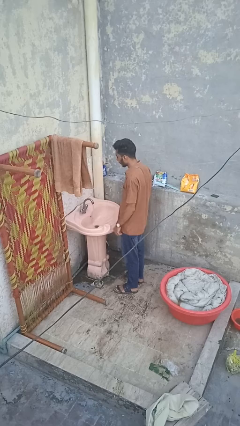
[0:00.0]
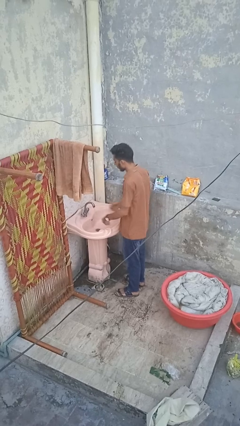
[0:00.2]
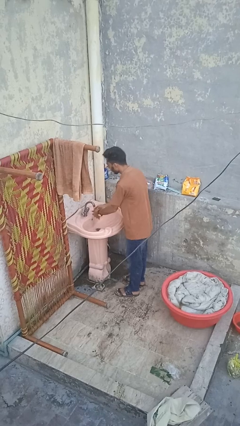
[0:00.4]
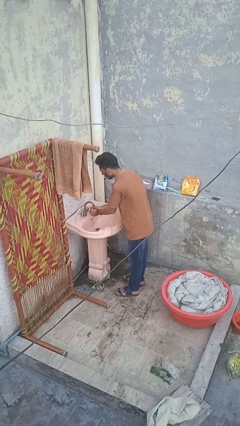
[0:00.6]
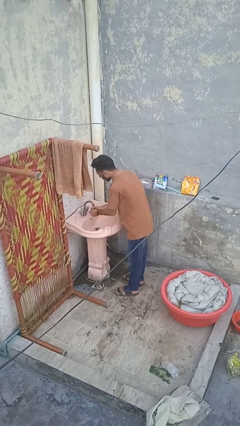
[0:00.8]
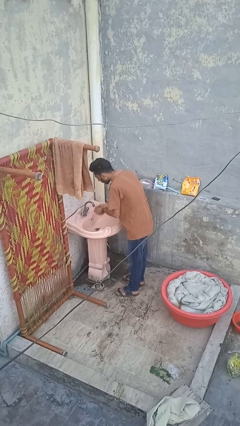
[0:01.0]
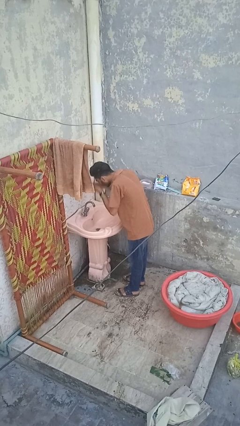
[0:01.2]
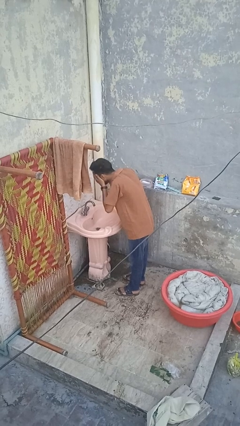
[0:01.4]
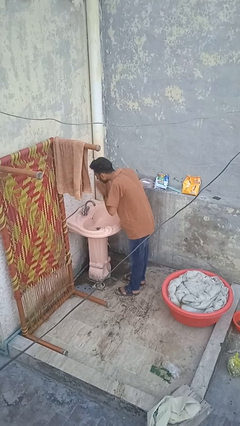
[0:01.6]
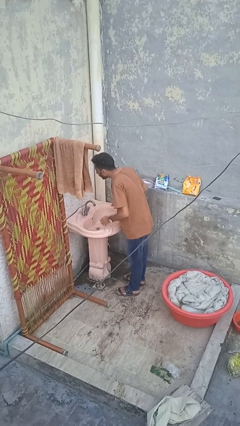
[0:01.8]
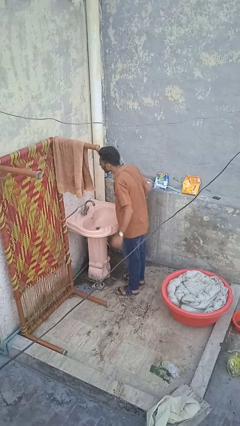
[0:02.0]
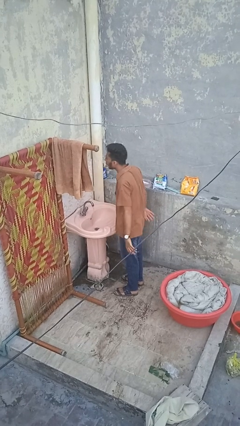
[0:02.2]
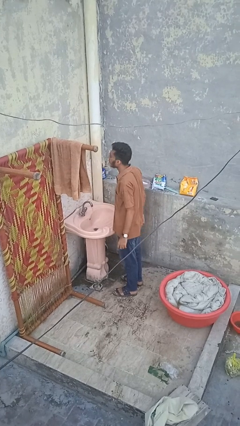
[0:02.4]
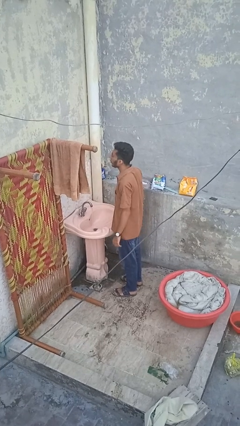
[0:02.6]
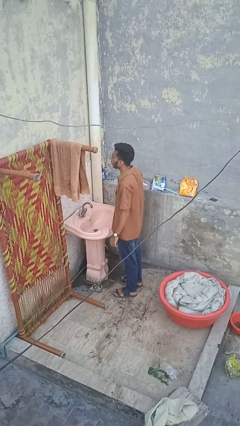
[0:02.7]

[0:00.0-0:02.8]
person washes face

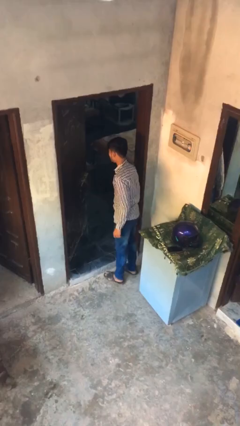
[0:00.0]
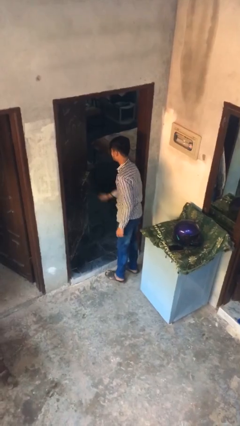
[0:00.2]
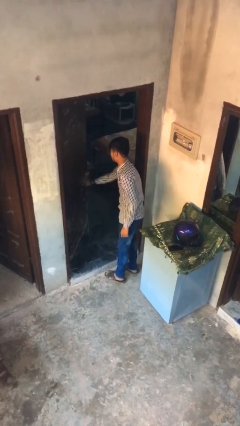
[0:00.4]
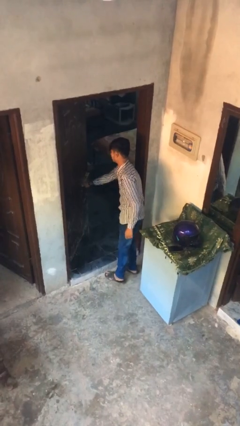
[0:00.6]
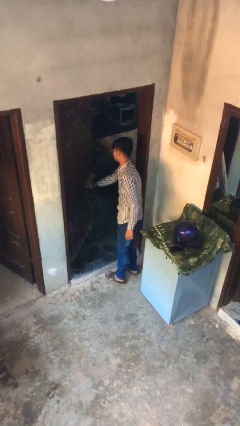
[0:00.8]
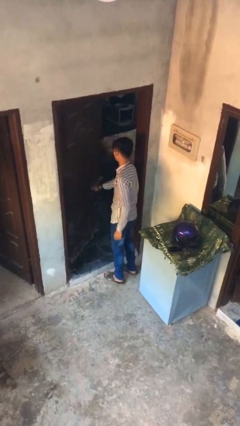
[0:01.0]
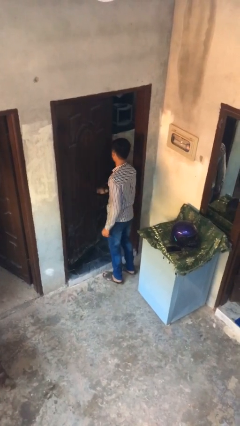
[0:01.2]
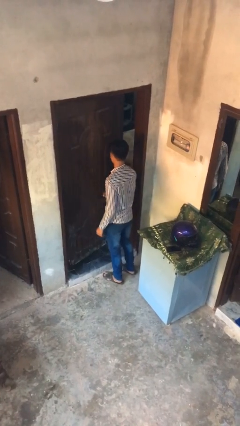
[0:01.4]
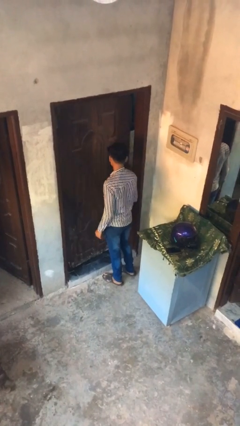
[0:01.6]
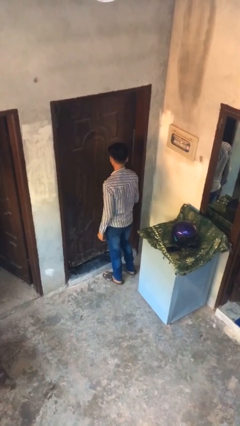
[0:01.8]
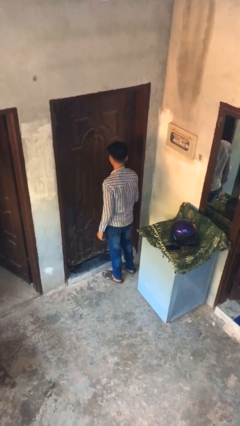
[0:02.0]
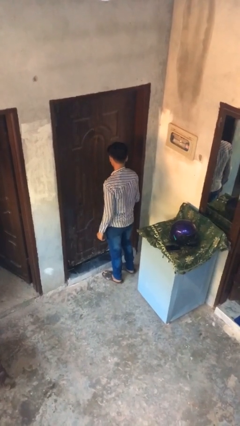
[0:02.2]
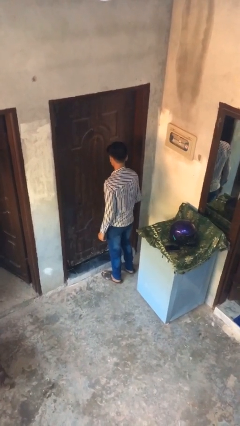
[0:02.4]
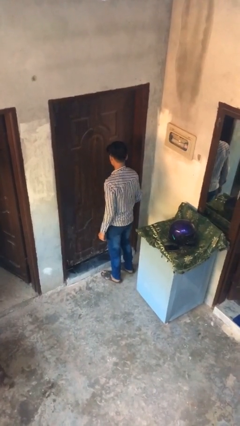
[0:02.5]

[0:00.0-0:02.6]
person closes facility door

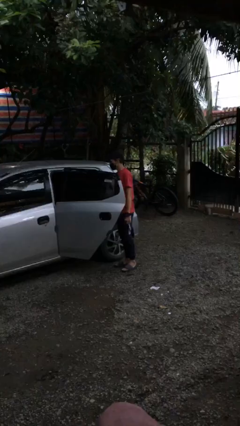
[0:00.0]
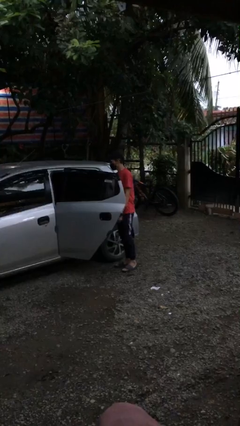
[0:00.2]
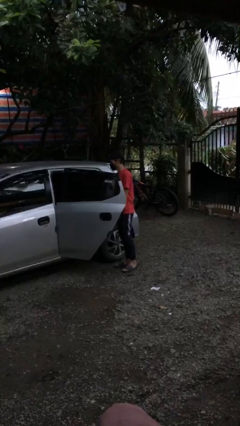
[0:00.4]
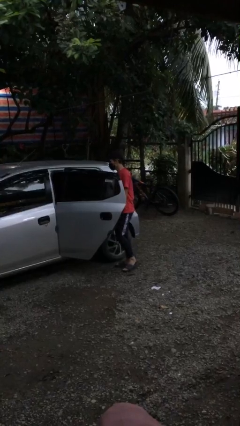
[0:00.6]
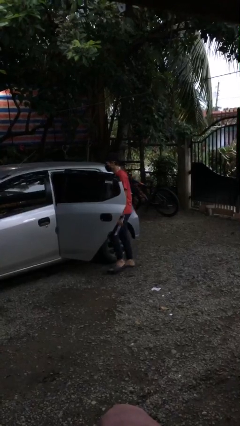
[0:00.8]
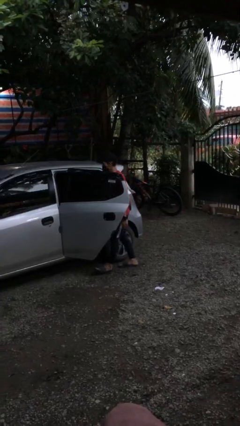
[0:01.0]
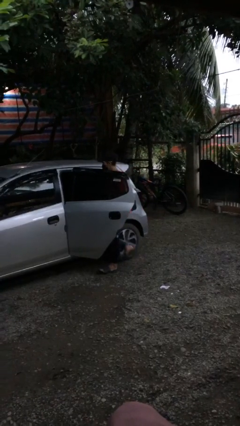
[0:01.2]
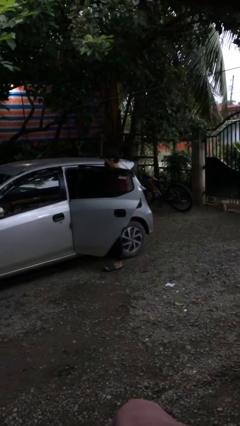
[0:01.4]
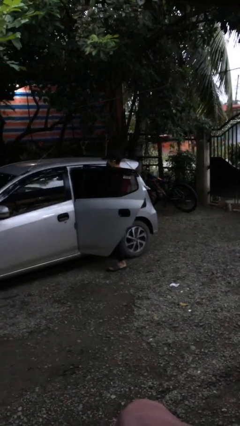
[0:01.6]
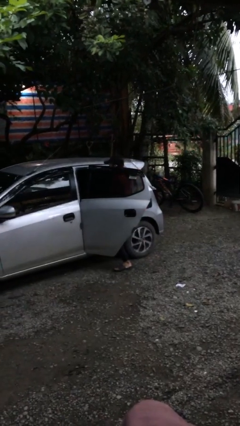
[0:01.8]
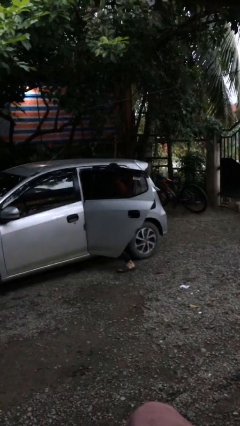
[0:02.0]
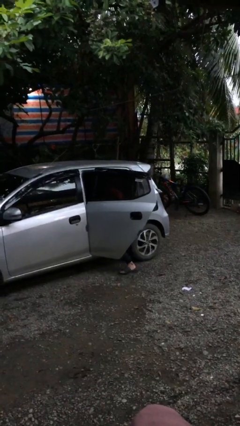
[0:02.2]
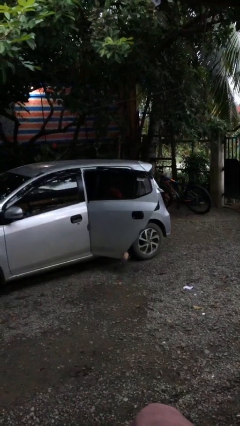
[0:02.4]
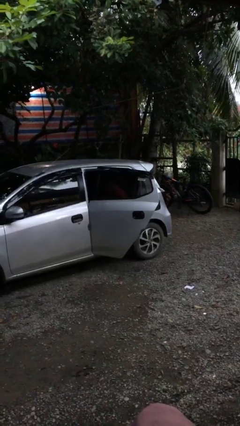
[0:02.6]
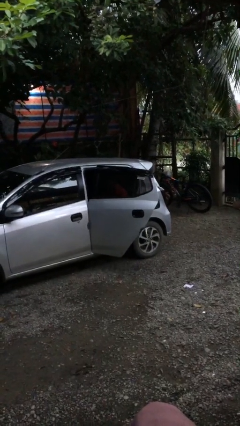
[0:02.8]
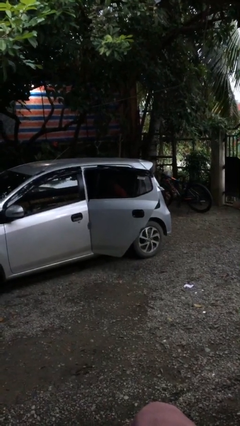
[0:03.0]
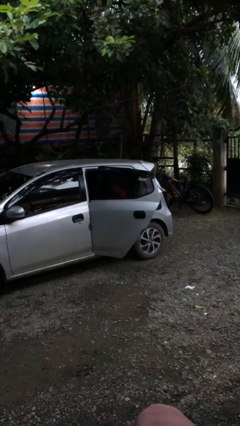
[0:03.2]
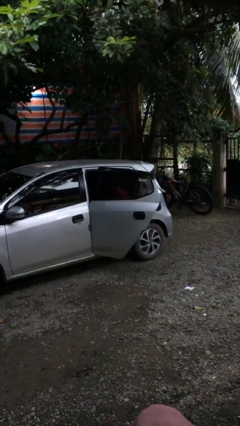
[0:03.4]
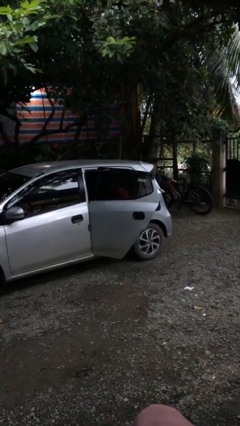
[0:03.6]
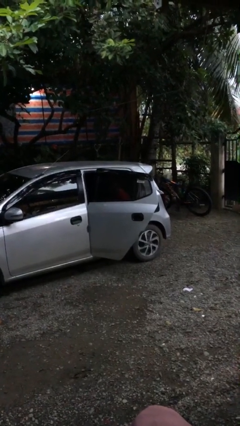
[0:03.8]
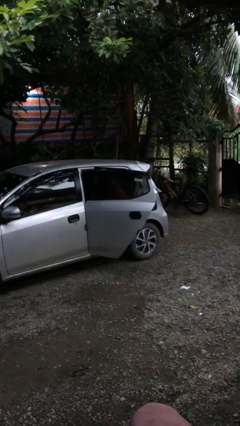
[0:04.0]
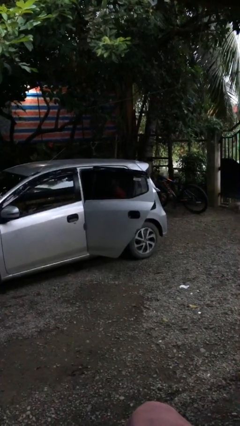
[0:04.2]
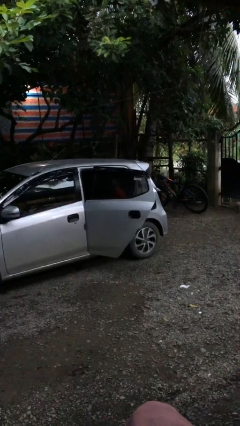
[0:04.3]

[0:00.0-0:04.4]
person enters car

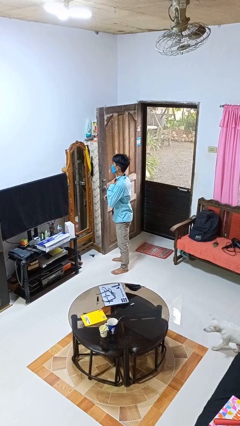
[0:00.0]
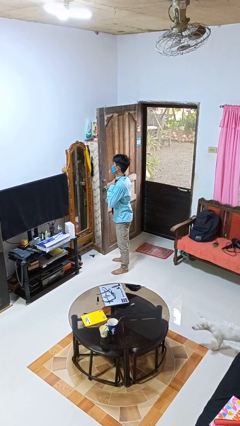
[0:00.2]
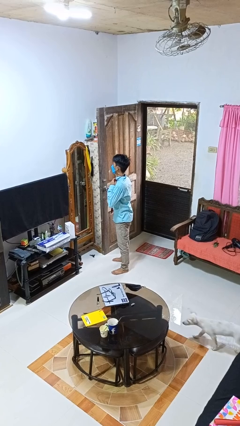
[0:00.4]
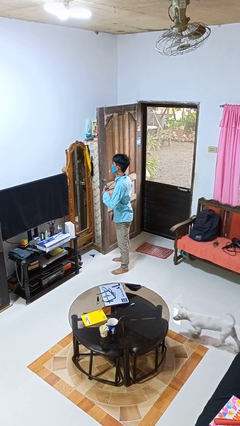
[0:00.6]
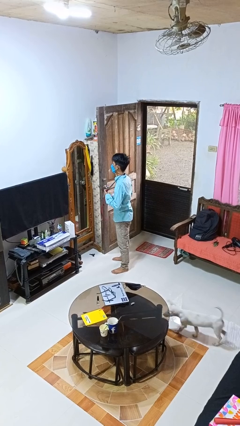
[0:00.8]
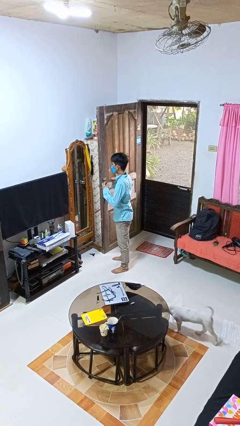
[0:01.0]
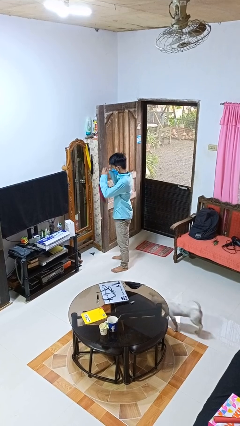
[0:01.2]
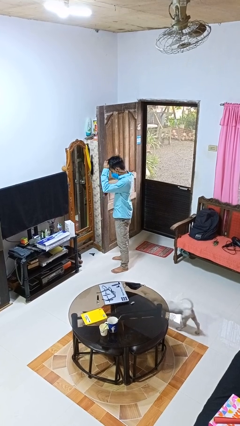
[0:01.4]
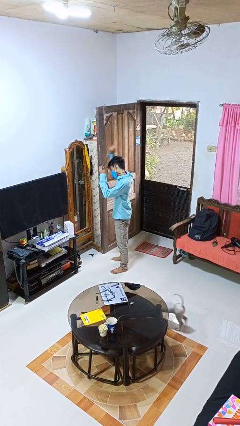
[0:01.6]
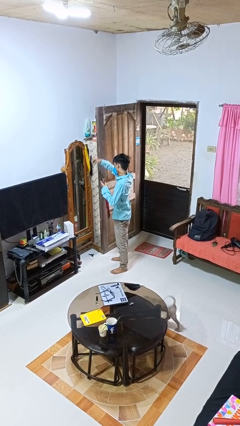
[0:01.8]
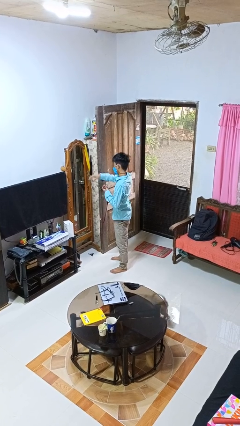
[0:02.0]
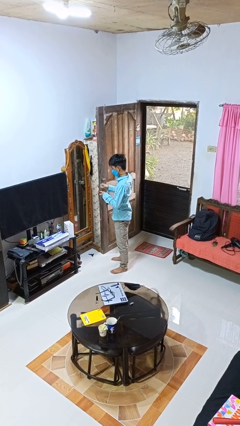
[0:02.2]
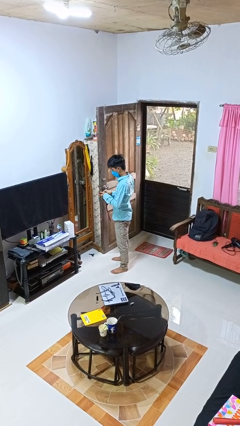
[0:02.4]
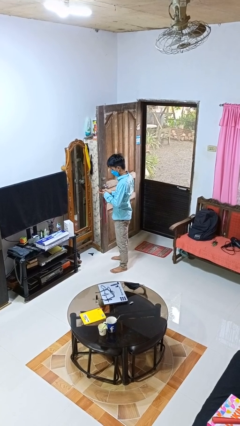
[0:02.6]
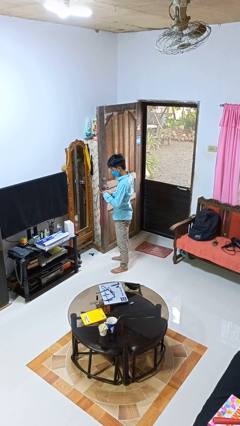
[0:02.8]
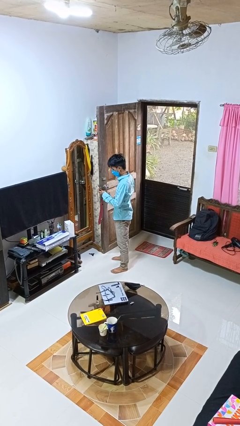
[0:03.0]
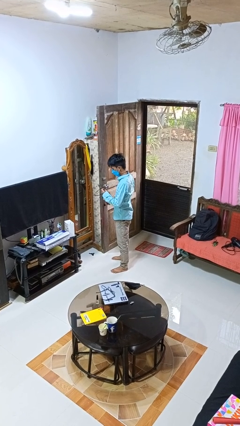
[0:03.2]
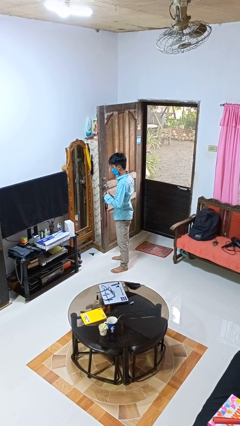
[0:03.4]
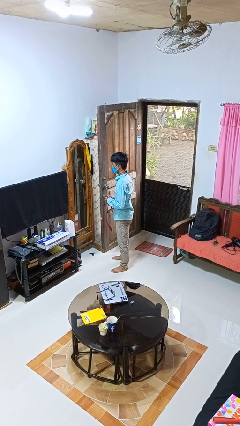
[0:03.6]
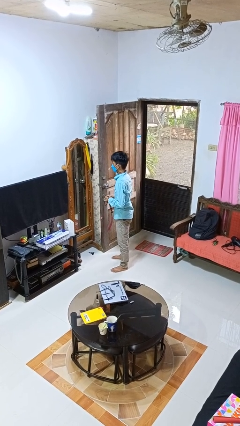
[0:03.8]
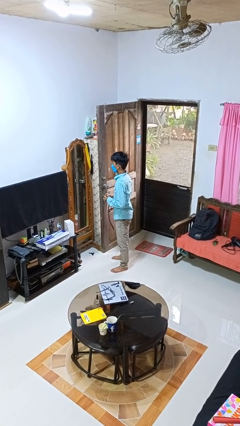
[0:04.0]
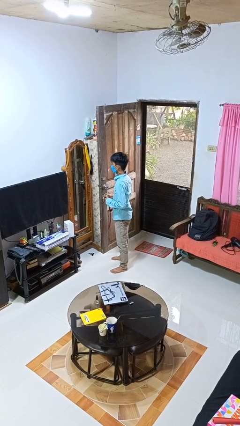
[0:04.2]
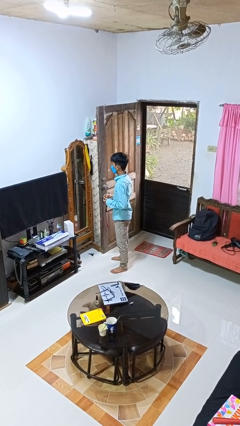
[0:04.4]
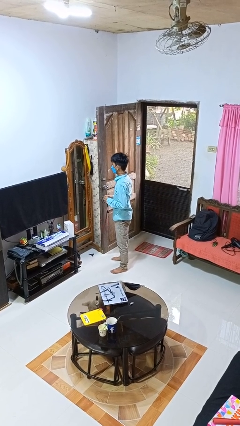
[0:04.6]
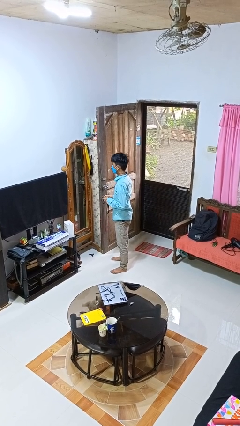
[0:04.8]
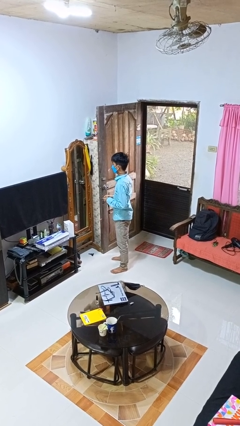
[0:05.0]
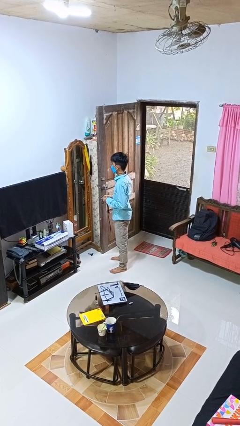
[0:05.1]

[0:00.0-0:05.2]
person takes off necktie

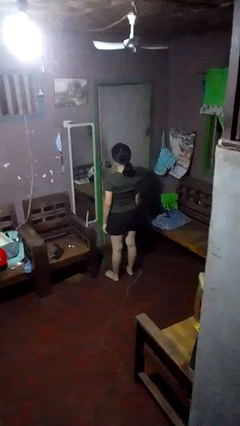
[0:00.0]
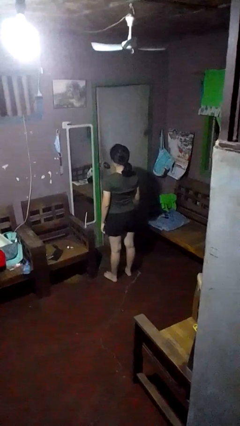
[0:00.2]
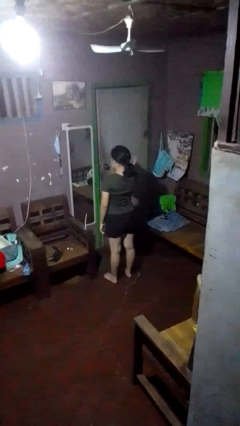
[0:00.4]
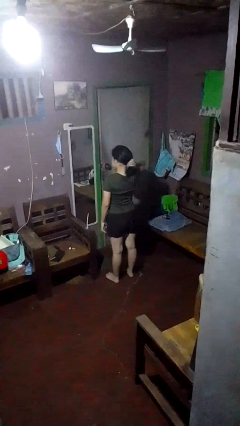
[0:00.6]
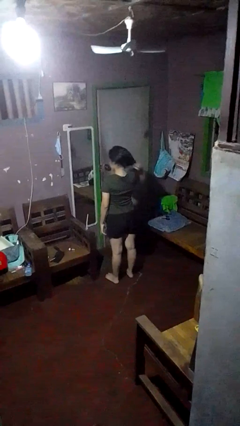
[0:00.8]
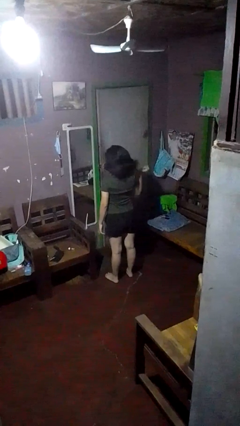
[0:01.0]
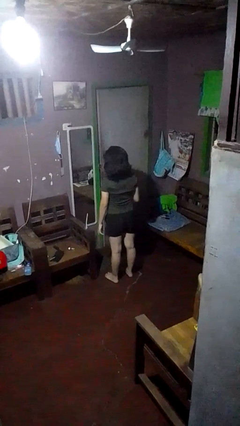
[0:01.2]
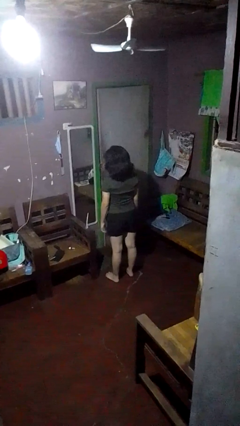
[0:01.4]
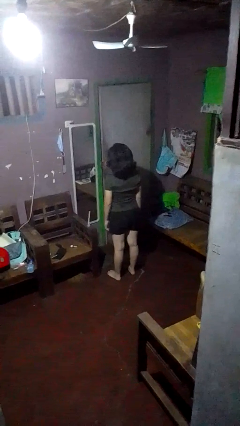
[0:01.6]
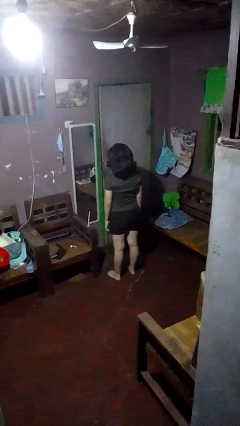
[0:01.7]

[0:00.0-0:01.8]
person takes off hairtie

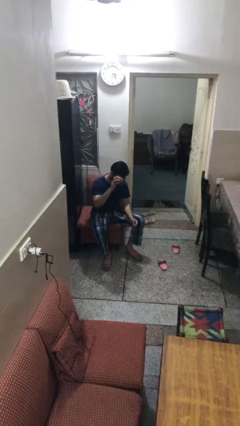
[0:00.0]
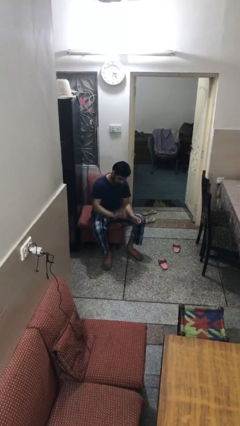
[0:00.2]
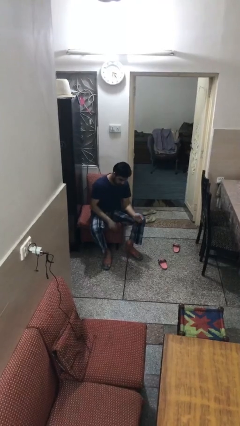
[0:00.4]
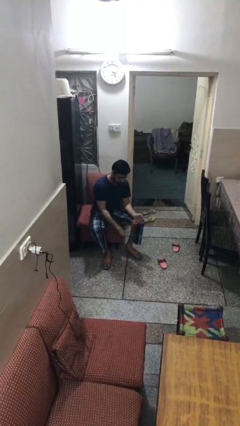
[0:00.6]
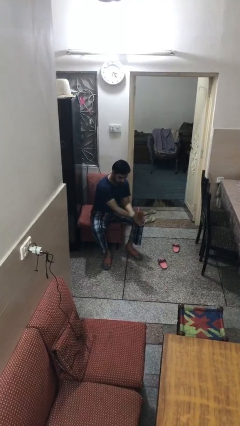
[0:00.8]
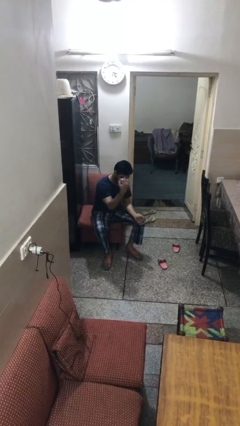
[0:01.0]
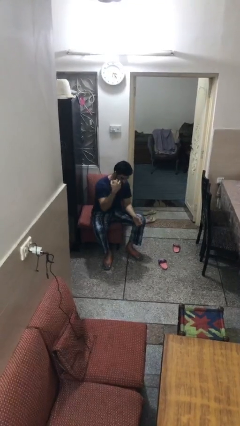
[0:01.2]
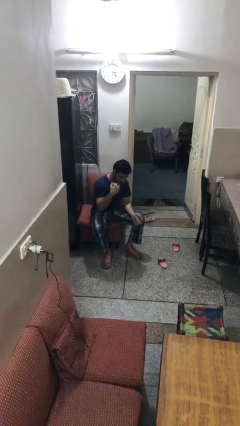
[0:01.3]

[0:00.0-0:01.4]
person bounces ball on floor
